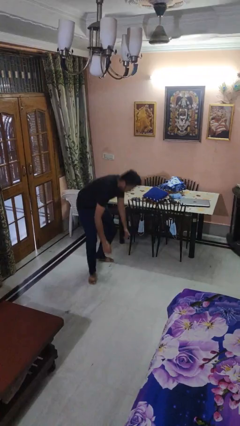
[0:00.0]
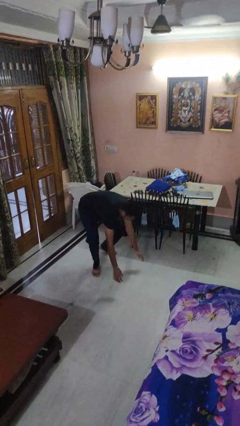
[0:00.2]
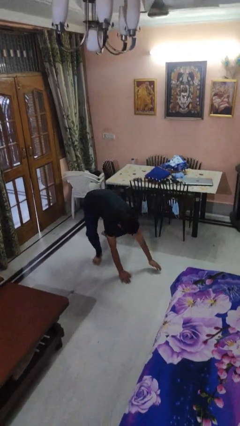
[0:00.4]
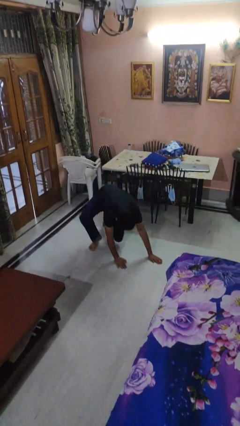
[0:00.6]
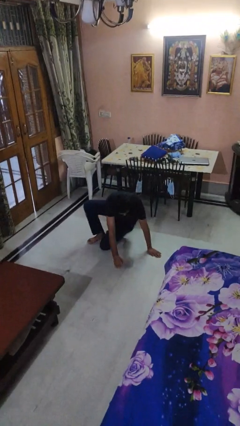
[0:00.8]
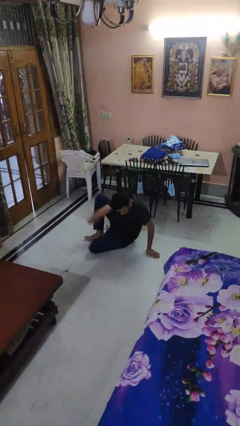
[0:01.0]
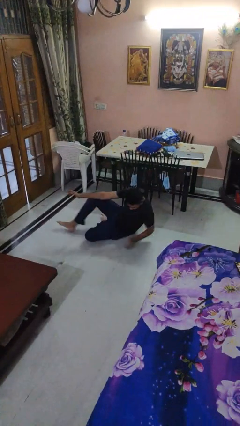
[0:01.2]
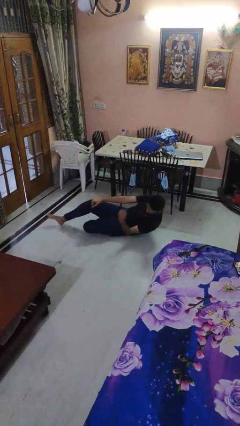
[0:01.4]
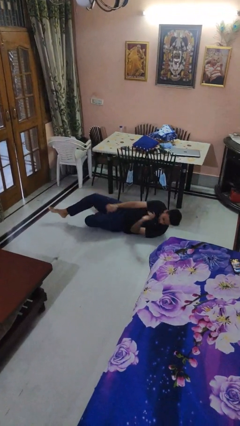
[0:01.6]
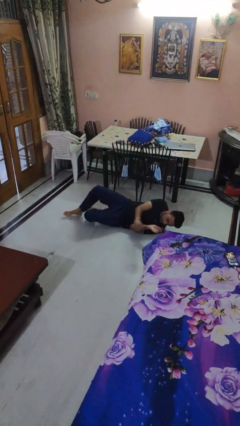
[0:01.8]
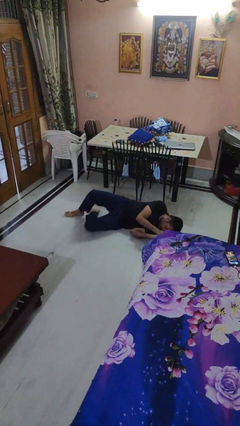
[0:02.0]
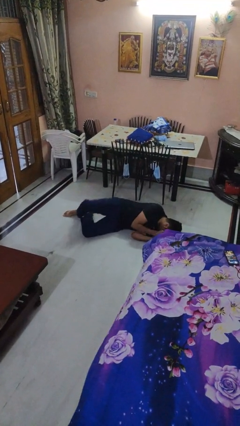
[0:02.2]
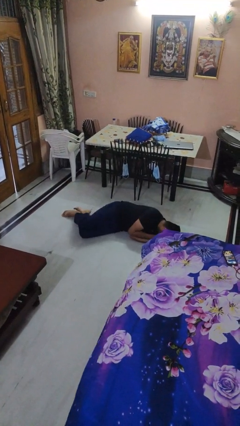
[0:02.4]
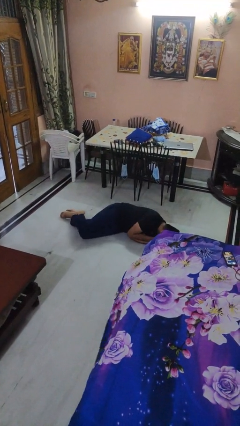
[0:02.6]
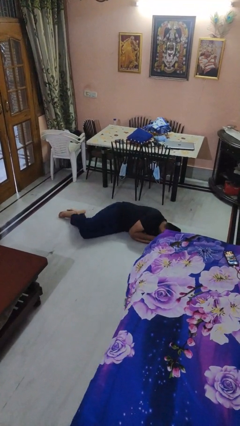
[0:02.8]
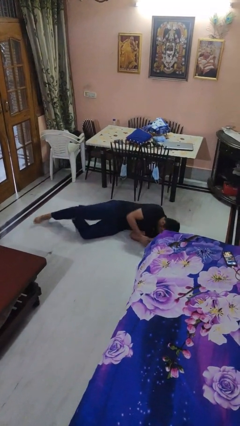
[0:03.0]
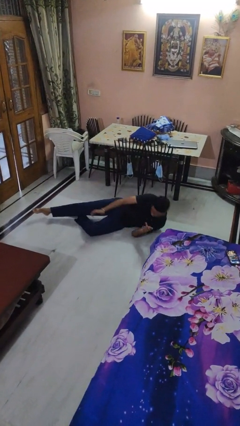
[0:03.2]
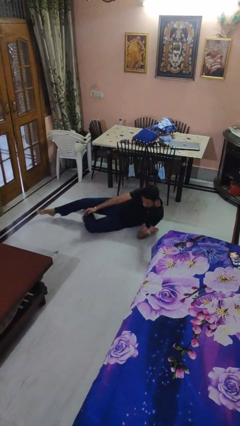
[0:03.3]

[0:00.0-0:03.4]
person lies down on floor

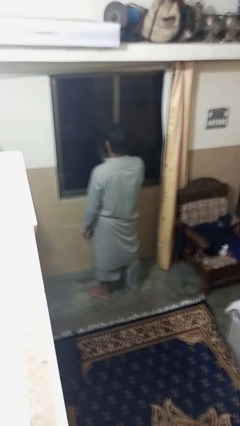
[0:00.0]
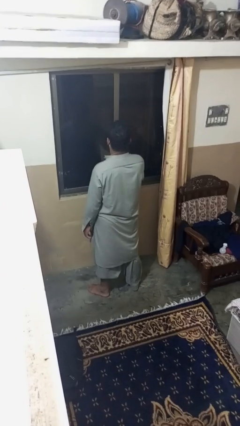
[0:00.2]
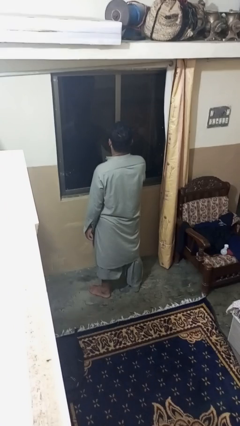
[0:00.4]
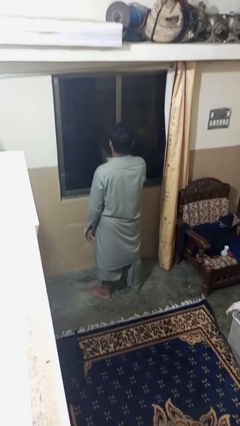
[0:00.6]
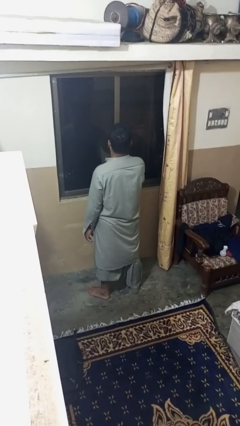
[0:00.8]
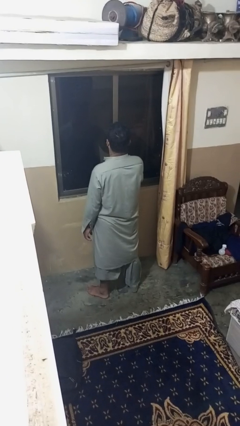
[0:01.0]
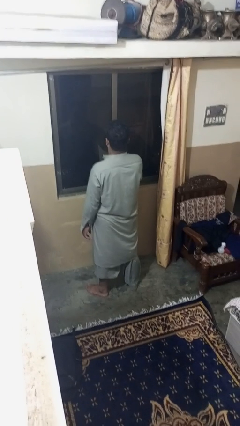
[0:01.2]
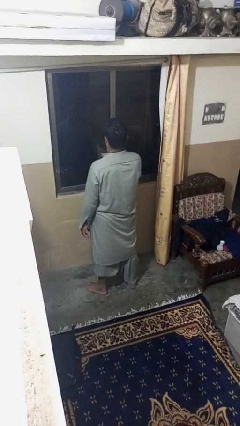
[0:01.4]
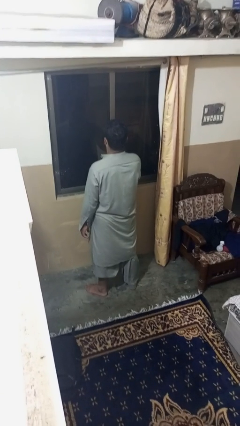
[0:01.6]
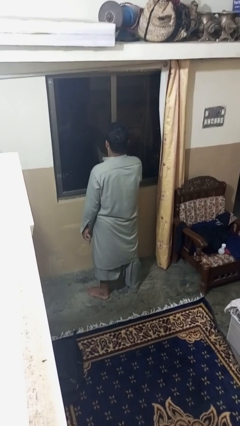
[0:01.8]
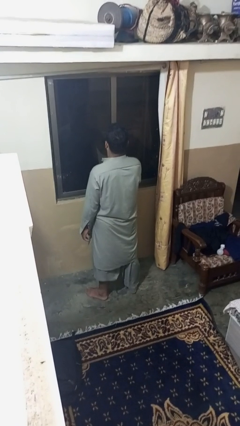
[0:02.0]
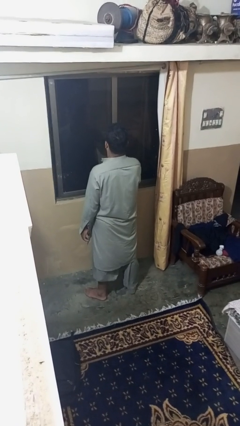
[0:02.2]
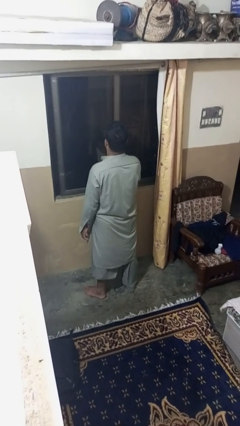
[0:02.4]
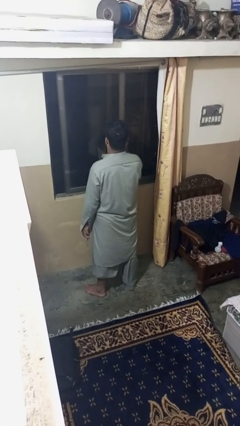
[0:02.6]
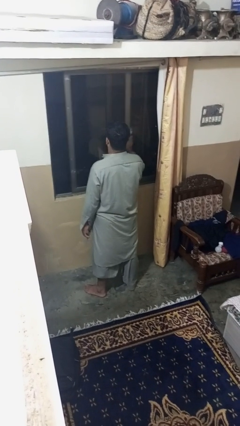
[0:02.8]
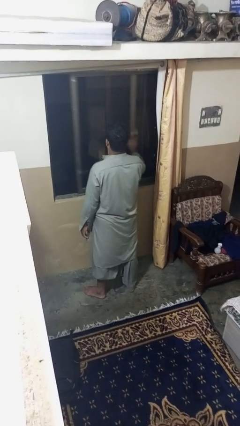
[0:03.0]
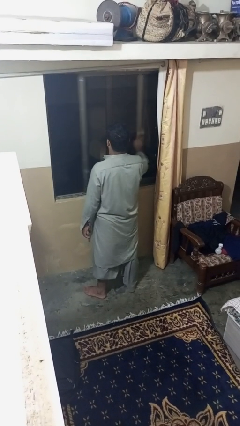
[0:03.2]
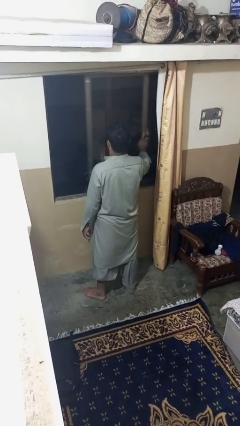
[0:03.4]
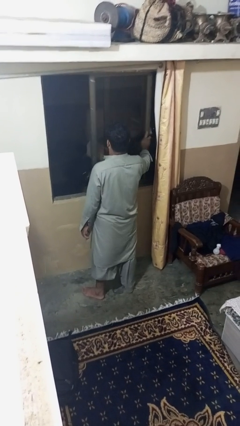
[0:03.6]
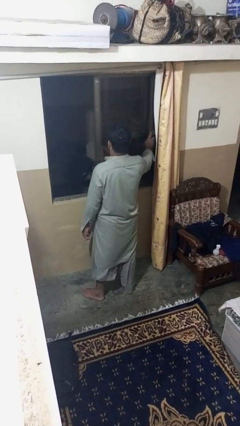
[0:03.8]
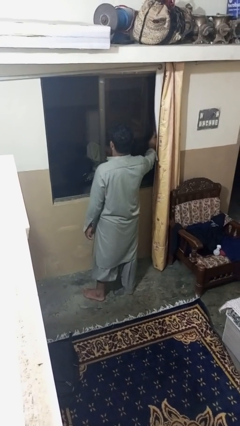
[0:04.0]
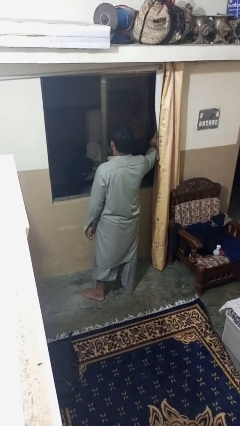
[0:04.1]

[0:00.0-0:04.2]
person opens home window

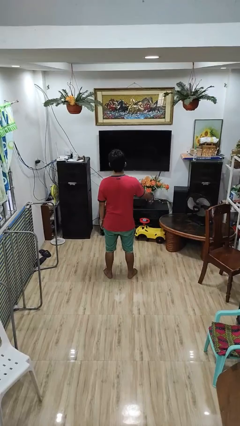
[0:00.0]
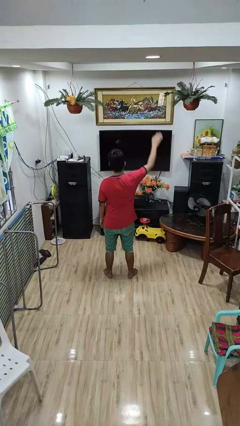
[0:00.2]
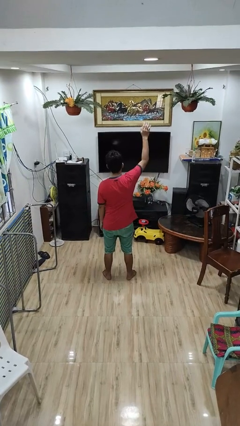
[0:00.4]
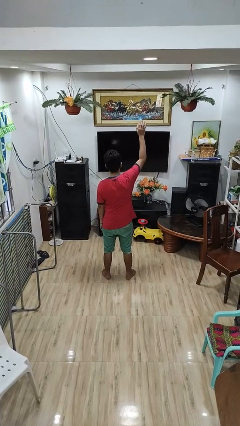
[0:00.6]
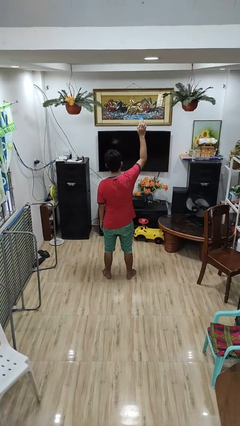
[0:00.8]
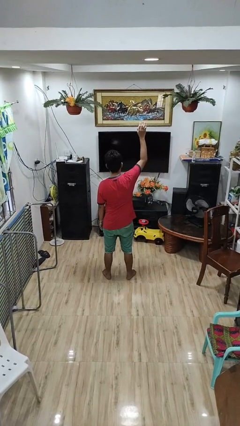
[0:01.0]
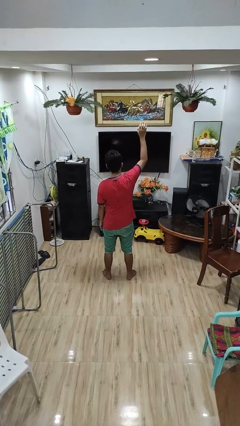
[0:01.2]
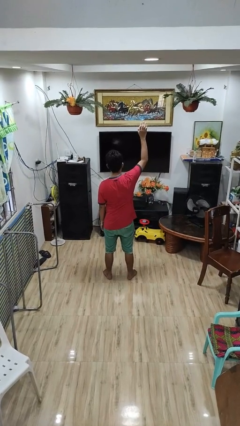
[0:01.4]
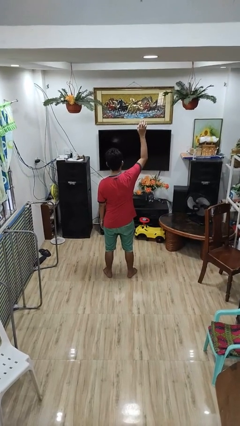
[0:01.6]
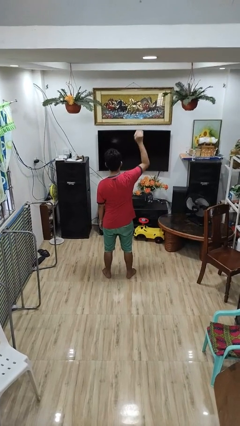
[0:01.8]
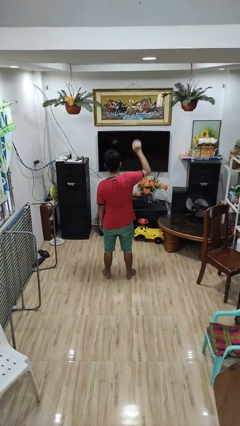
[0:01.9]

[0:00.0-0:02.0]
person gestures raise hand

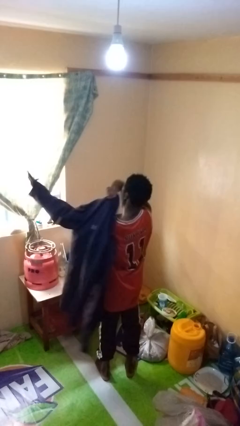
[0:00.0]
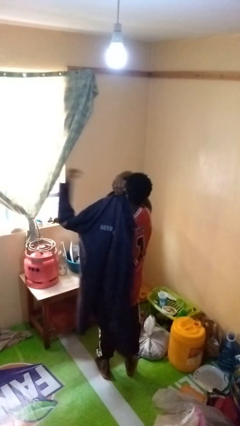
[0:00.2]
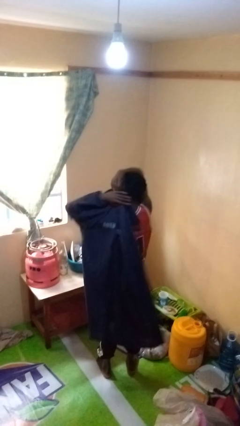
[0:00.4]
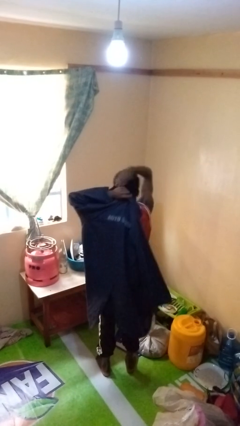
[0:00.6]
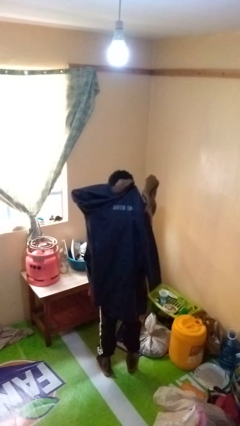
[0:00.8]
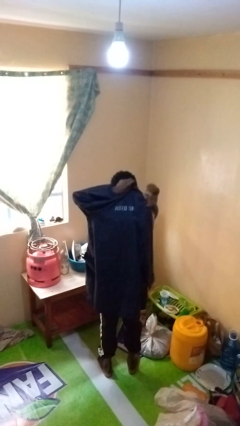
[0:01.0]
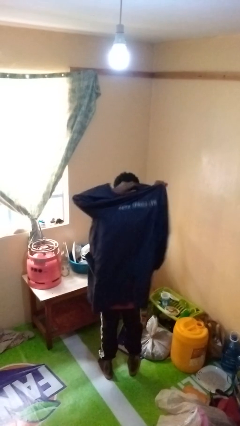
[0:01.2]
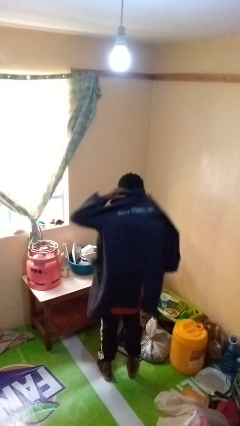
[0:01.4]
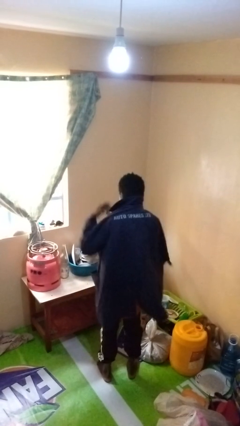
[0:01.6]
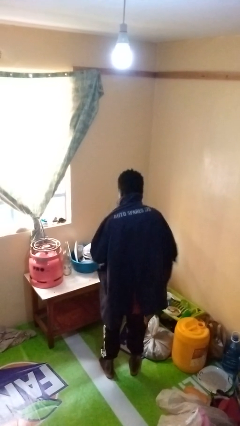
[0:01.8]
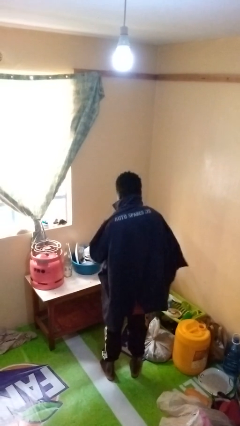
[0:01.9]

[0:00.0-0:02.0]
person puts on apron

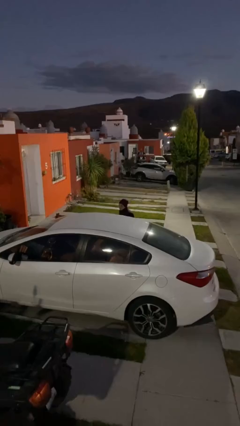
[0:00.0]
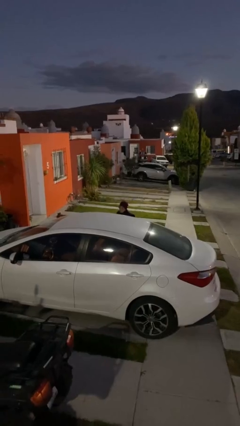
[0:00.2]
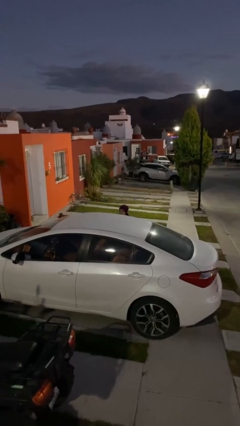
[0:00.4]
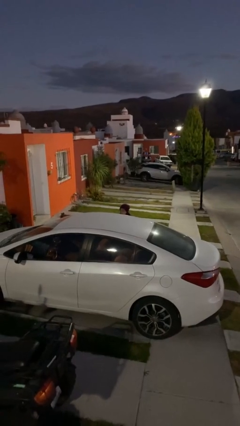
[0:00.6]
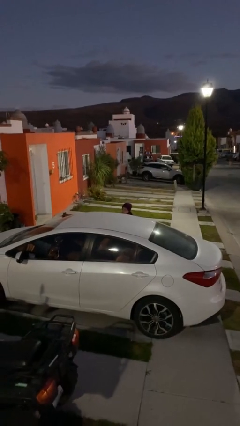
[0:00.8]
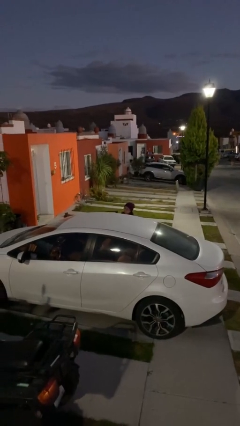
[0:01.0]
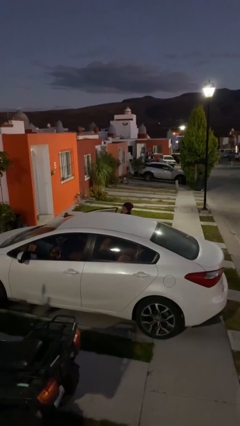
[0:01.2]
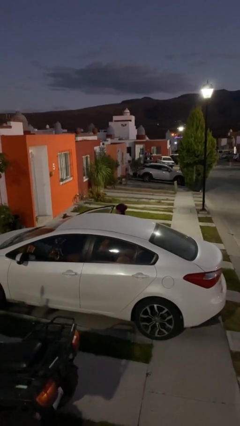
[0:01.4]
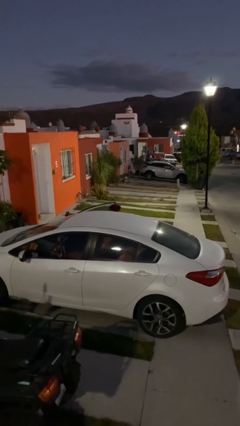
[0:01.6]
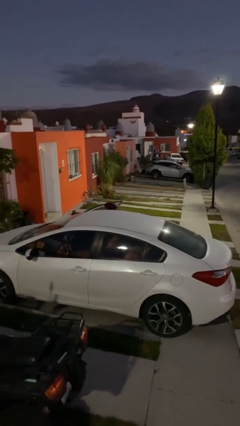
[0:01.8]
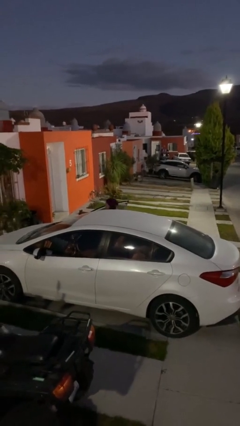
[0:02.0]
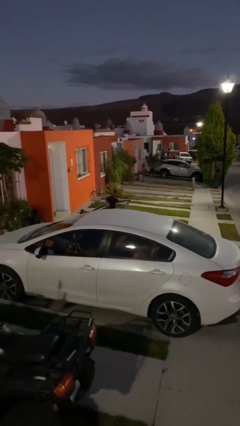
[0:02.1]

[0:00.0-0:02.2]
car picks up person

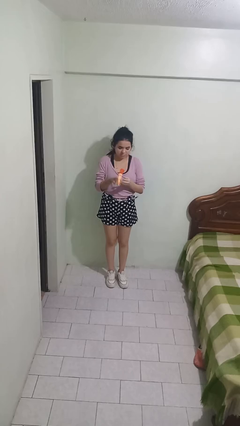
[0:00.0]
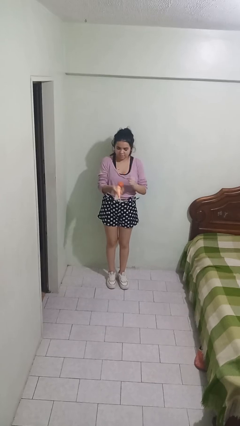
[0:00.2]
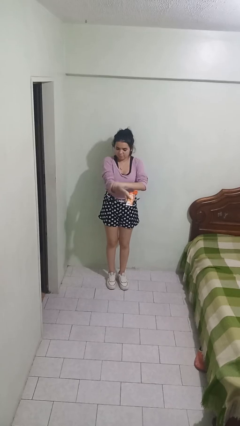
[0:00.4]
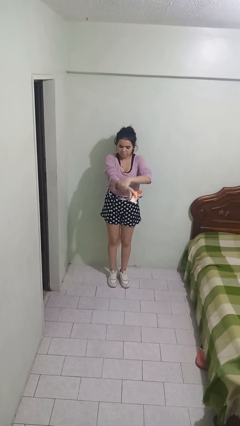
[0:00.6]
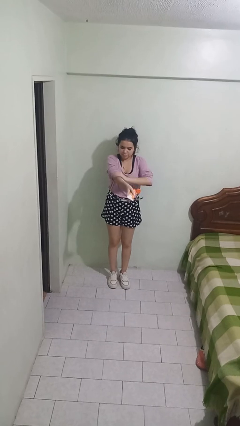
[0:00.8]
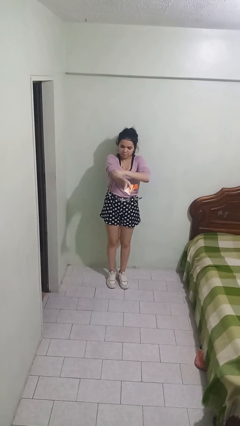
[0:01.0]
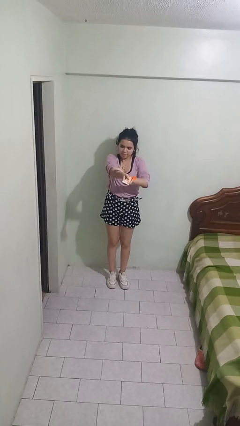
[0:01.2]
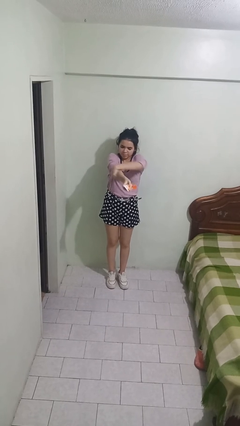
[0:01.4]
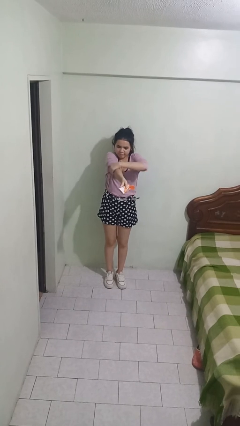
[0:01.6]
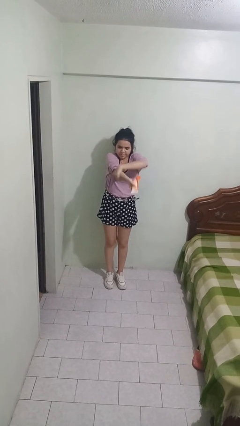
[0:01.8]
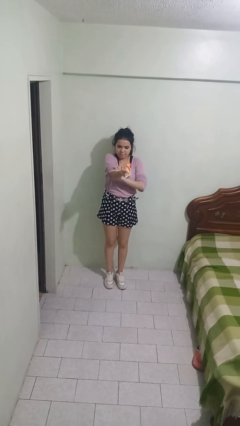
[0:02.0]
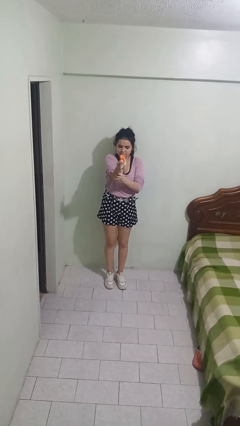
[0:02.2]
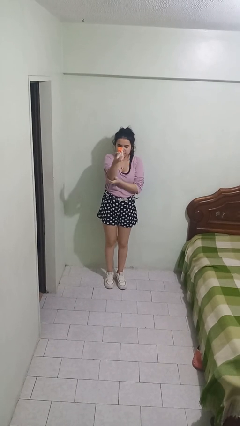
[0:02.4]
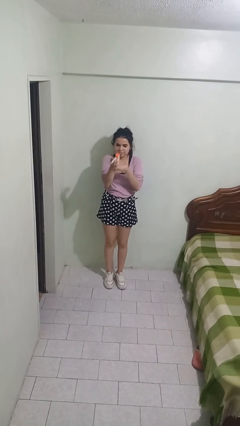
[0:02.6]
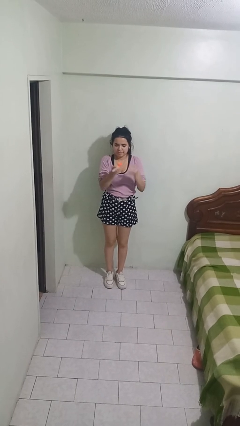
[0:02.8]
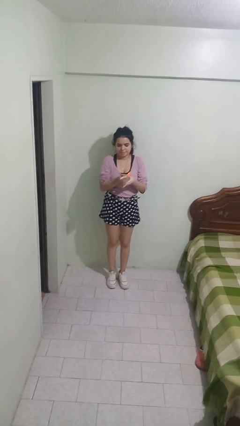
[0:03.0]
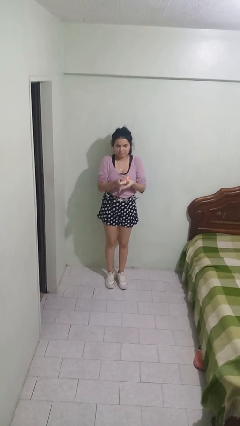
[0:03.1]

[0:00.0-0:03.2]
person applies sunscreen

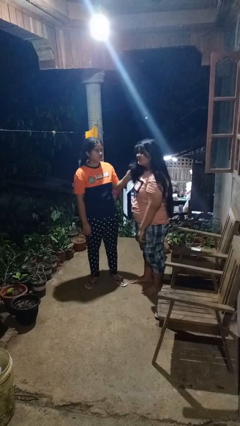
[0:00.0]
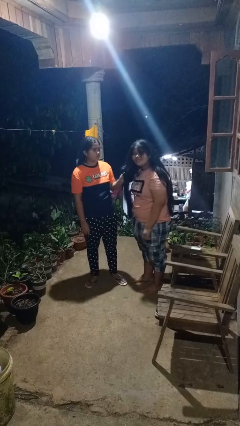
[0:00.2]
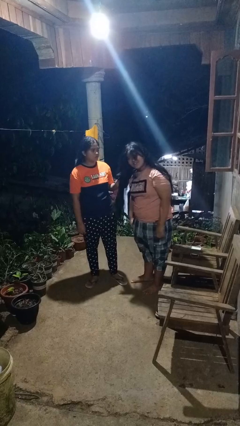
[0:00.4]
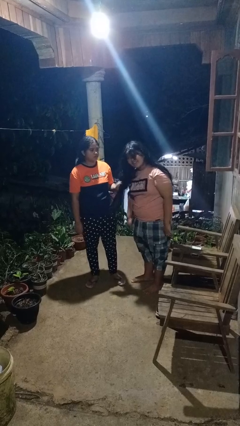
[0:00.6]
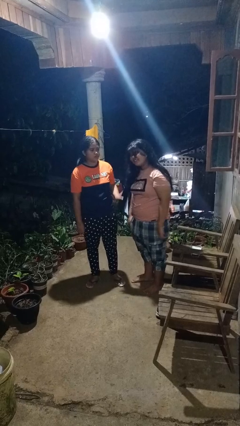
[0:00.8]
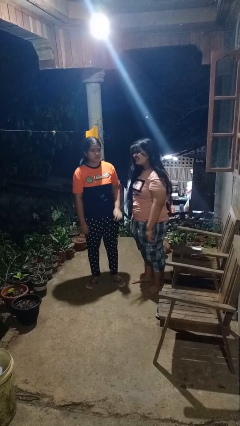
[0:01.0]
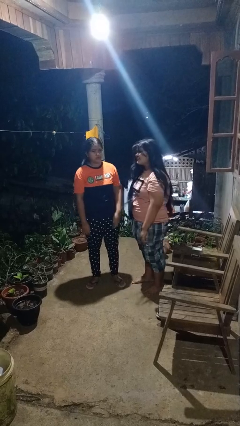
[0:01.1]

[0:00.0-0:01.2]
person grabs person by hair
